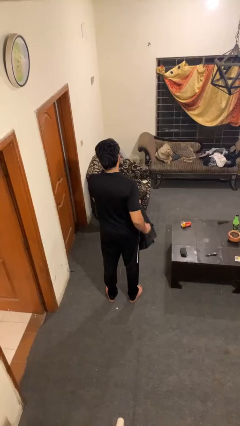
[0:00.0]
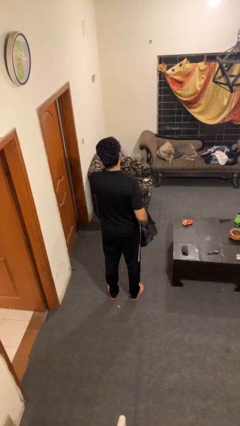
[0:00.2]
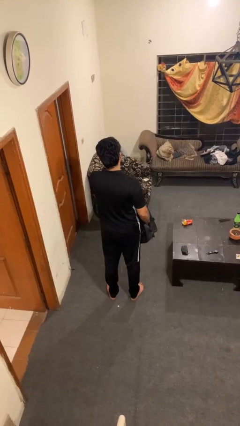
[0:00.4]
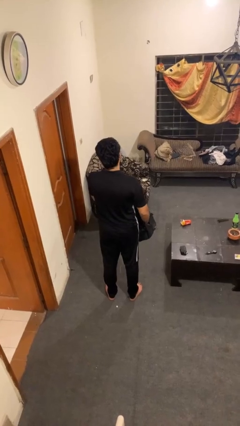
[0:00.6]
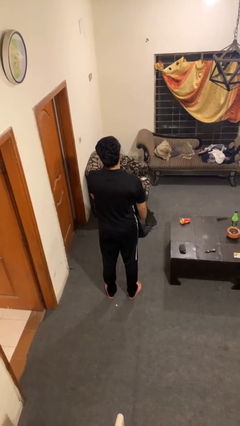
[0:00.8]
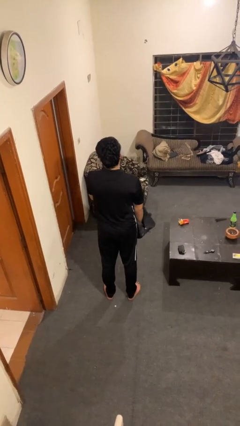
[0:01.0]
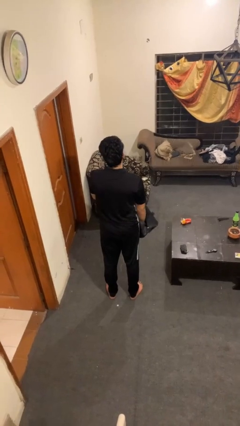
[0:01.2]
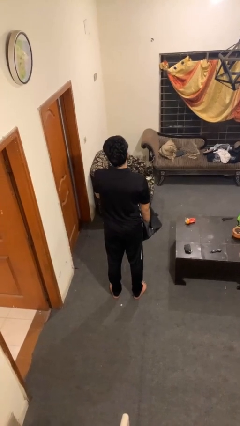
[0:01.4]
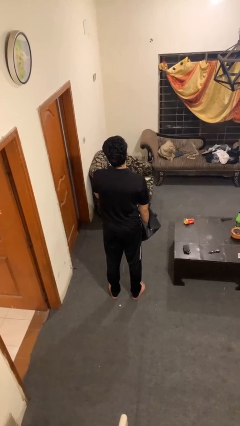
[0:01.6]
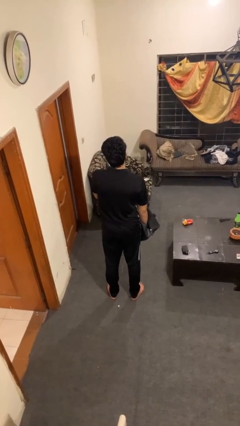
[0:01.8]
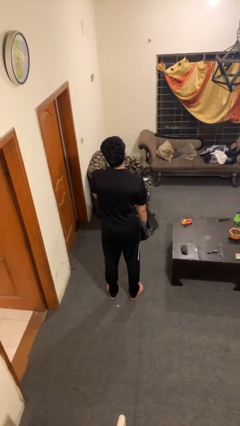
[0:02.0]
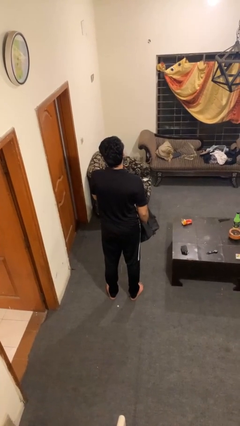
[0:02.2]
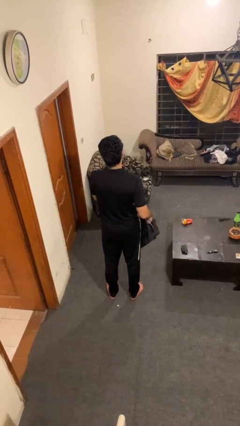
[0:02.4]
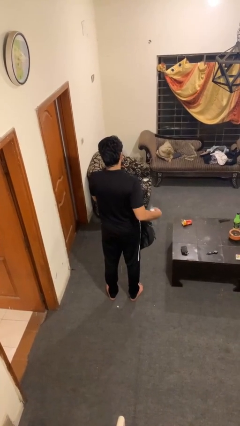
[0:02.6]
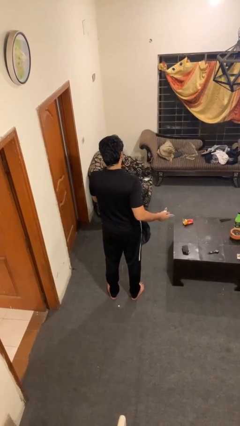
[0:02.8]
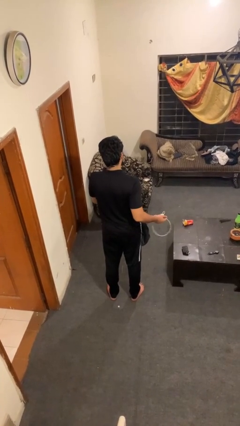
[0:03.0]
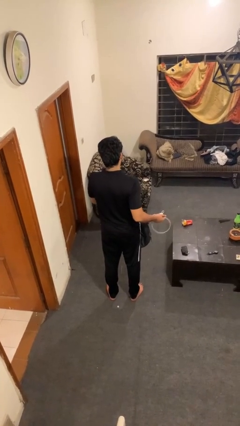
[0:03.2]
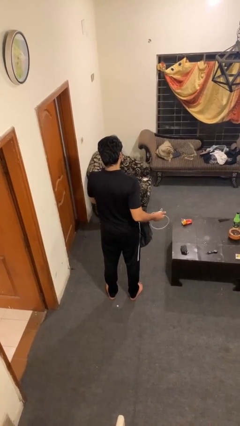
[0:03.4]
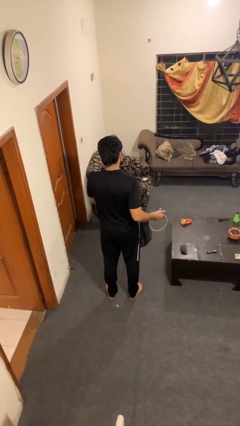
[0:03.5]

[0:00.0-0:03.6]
person takes object from bag

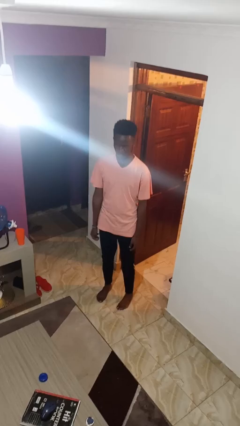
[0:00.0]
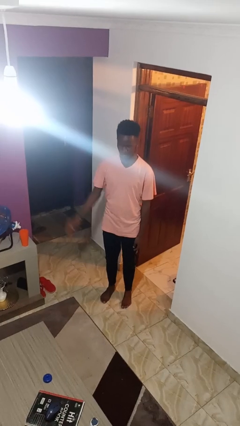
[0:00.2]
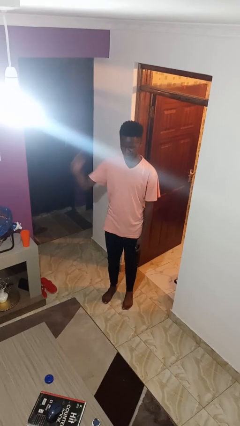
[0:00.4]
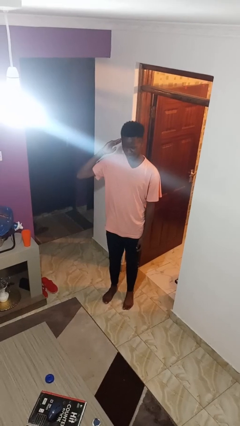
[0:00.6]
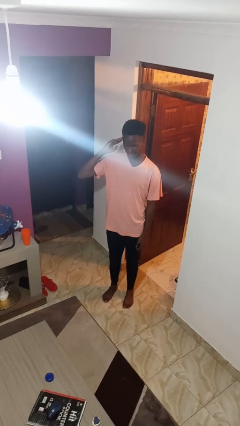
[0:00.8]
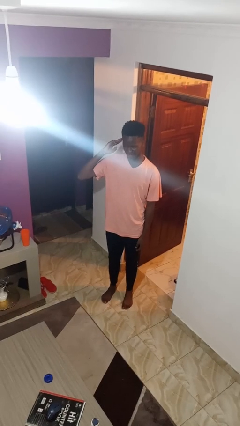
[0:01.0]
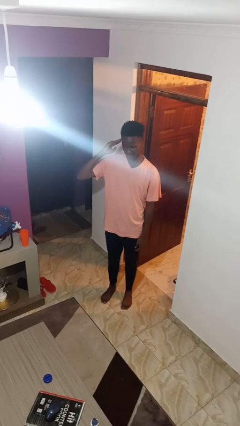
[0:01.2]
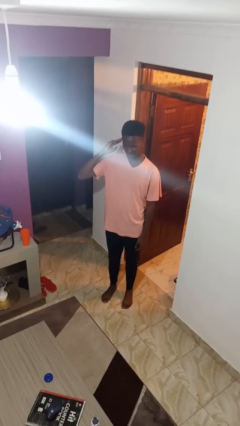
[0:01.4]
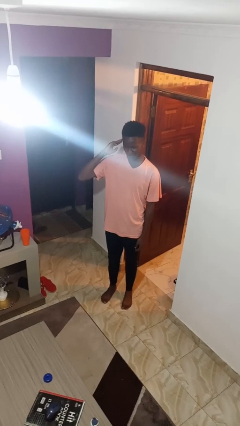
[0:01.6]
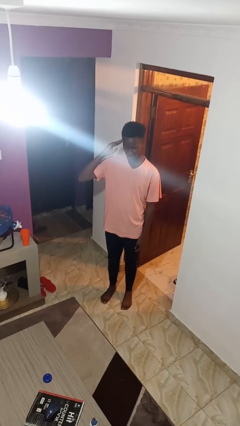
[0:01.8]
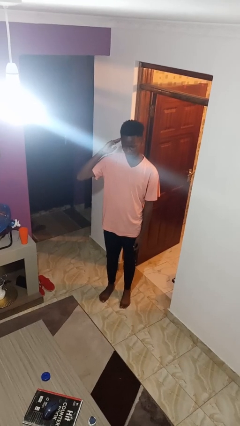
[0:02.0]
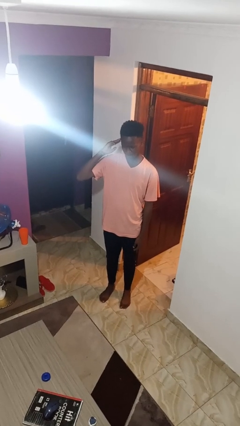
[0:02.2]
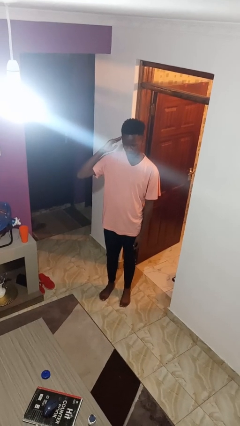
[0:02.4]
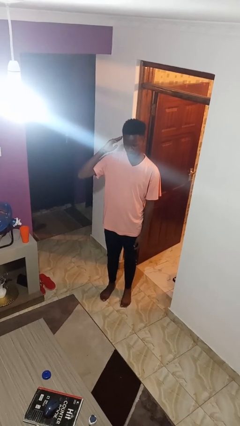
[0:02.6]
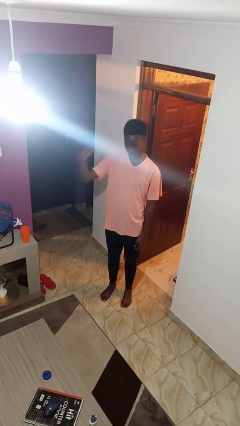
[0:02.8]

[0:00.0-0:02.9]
person salutes

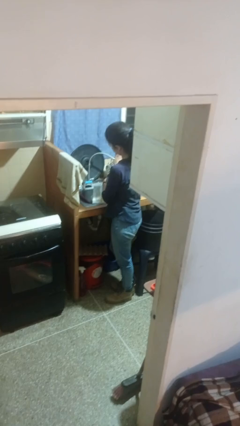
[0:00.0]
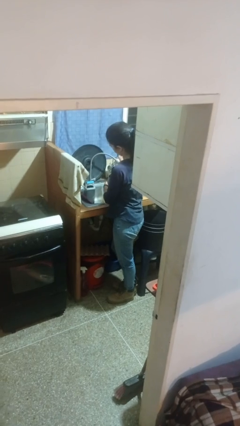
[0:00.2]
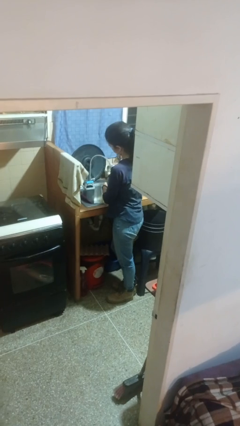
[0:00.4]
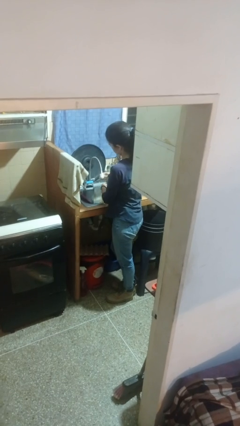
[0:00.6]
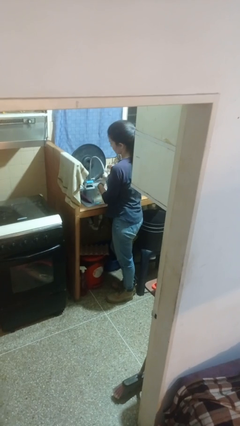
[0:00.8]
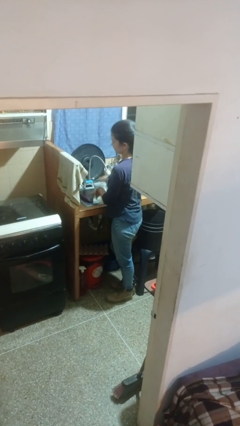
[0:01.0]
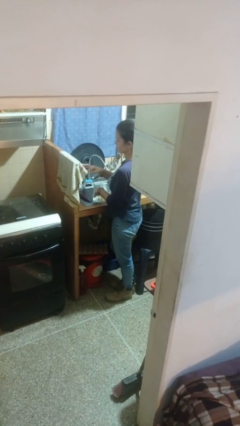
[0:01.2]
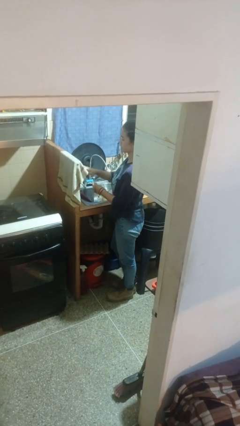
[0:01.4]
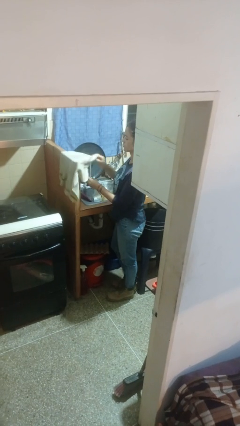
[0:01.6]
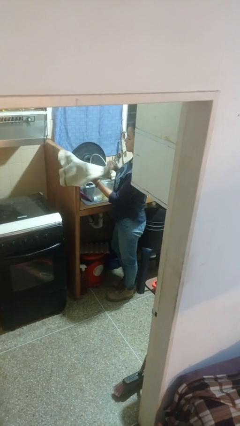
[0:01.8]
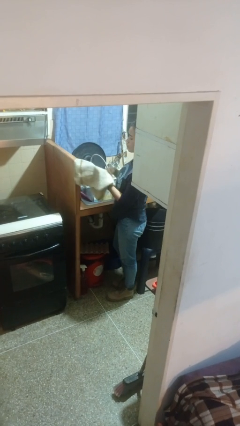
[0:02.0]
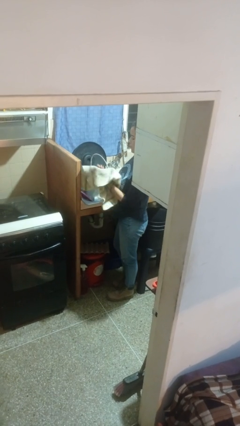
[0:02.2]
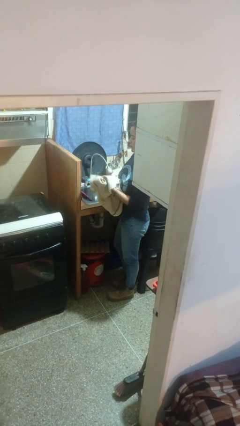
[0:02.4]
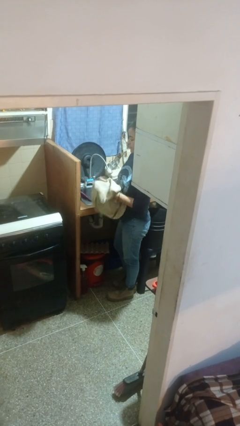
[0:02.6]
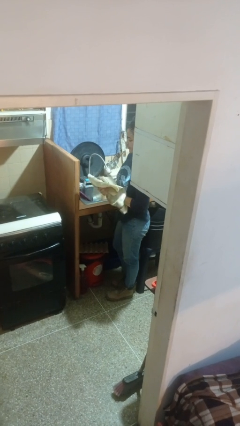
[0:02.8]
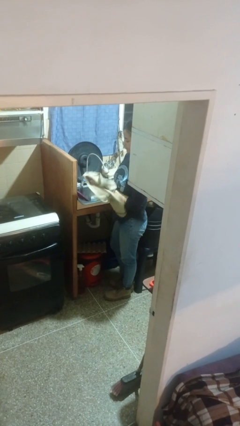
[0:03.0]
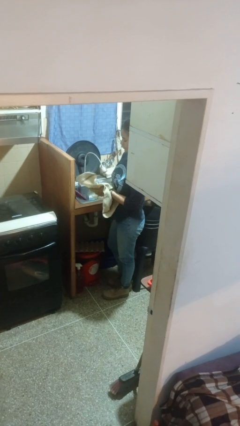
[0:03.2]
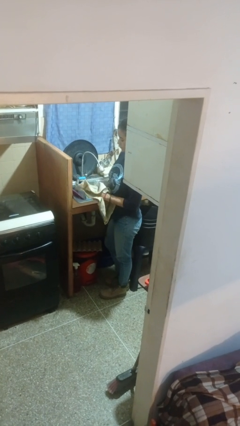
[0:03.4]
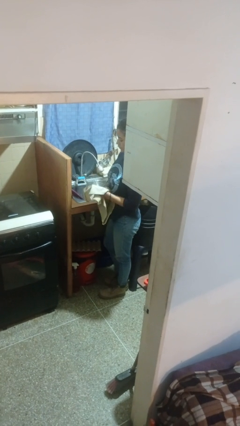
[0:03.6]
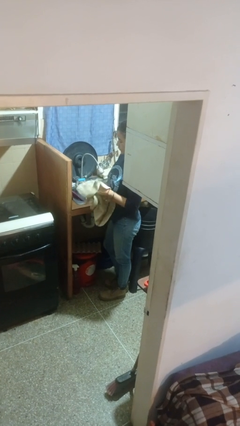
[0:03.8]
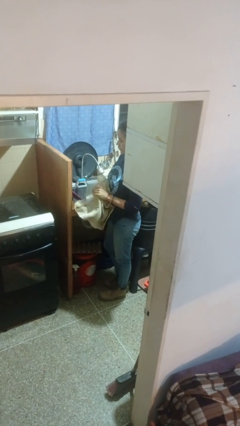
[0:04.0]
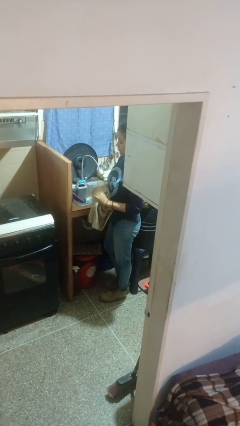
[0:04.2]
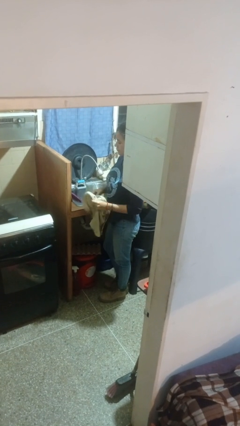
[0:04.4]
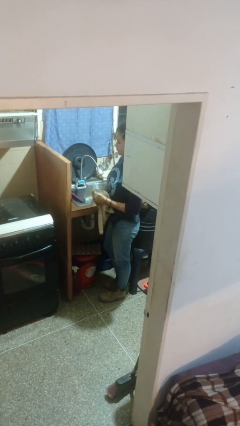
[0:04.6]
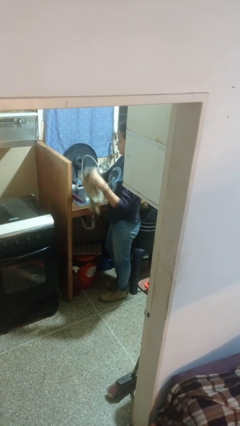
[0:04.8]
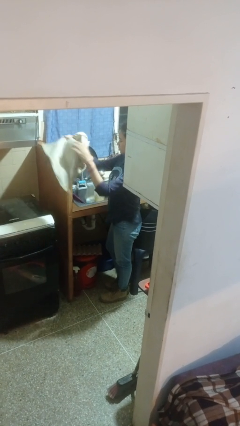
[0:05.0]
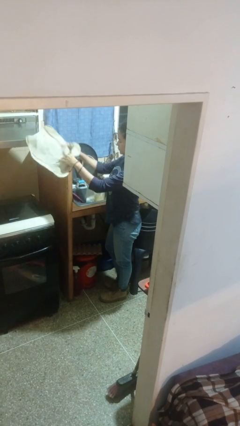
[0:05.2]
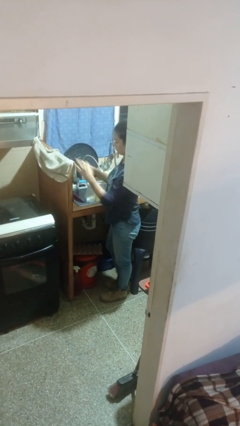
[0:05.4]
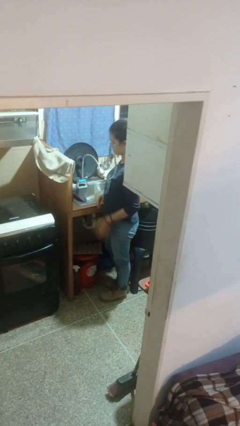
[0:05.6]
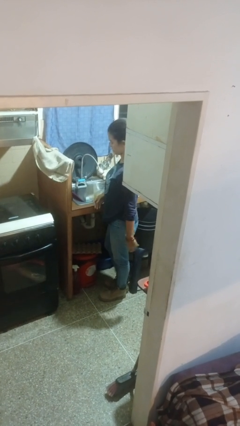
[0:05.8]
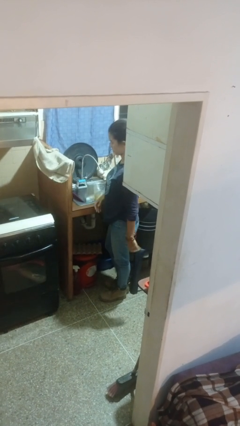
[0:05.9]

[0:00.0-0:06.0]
person dries hands with towel

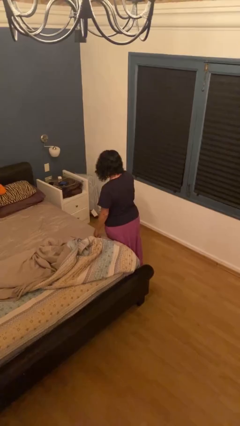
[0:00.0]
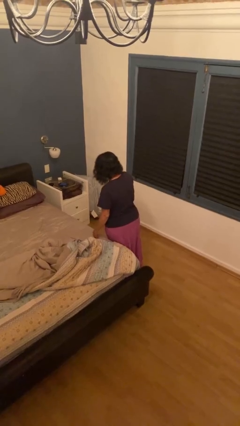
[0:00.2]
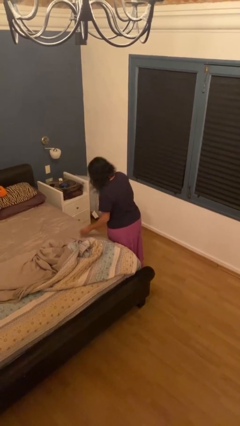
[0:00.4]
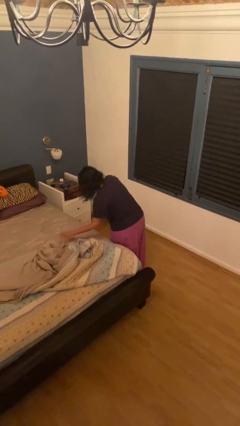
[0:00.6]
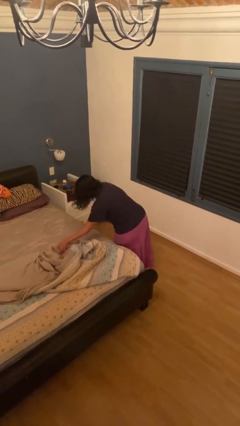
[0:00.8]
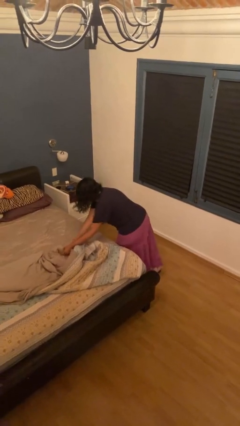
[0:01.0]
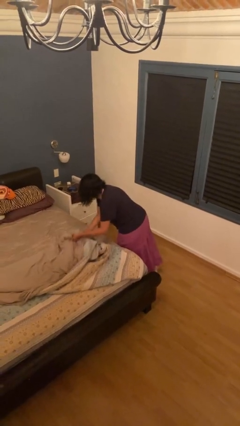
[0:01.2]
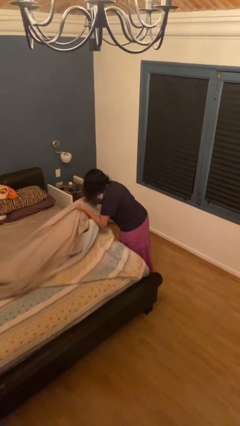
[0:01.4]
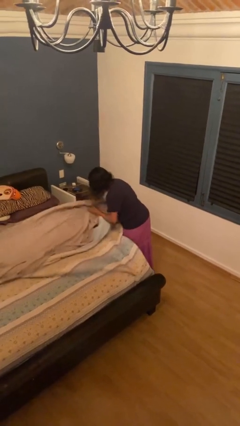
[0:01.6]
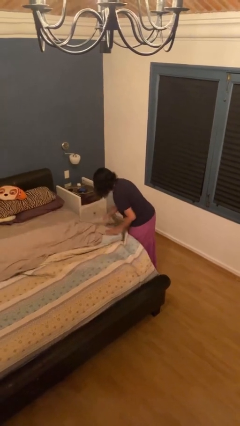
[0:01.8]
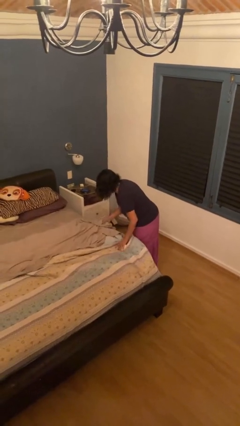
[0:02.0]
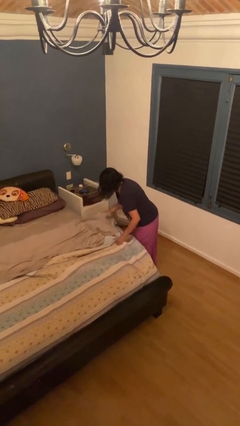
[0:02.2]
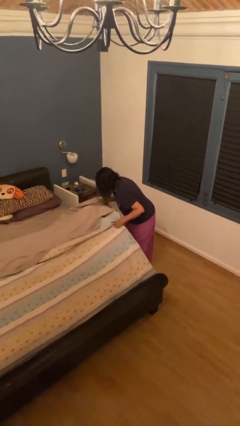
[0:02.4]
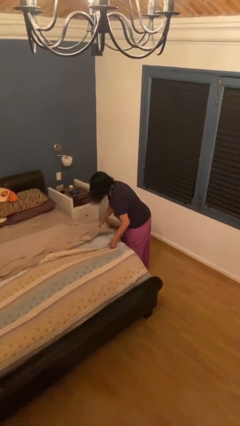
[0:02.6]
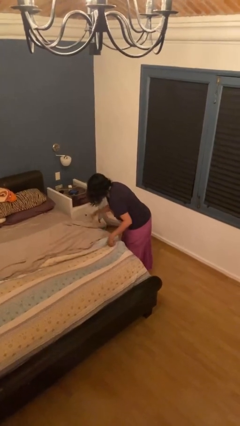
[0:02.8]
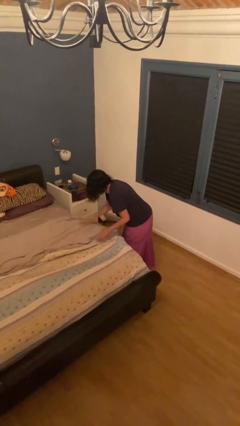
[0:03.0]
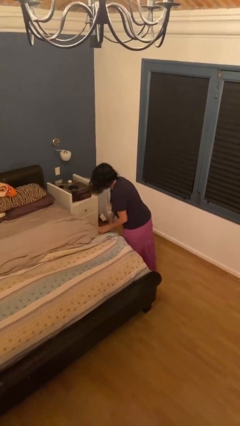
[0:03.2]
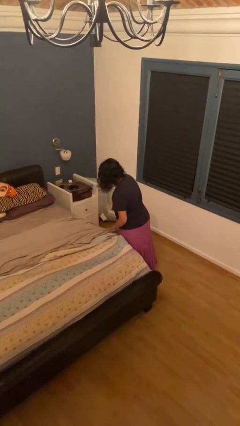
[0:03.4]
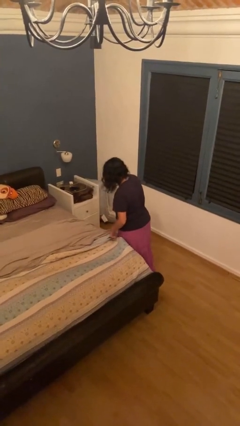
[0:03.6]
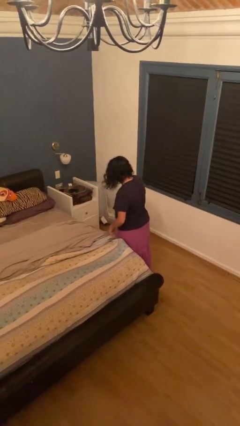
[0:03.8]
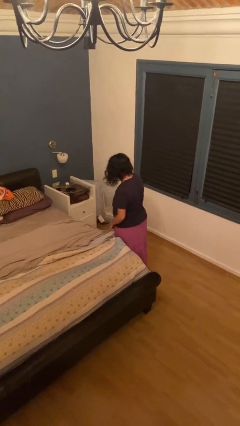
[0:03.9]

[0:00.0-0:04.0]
person makes bed

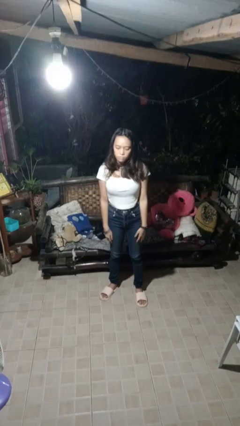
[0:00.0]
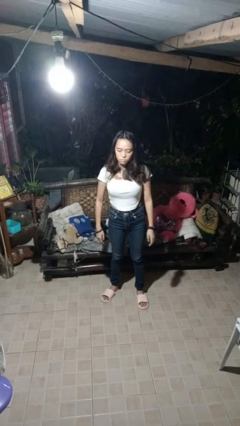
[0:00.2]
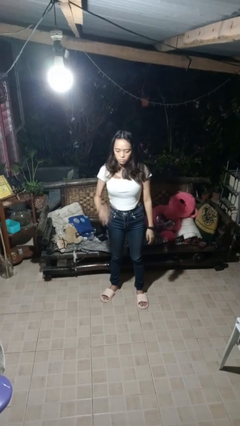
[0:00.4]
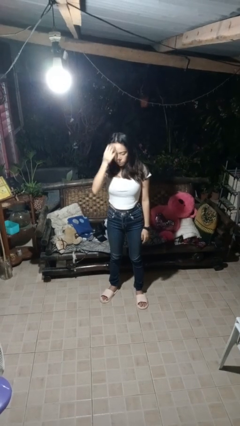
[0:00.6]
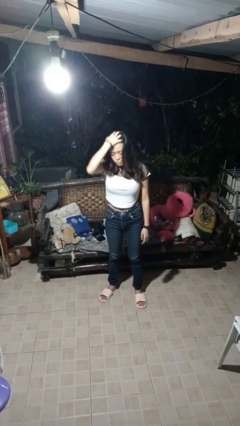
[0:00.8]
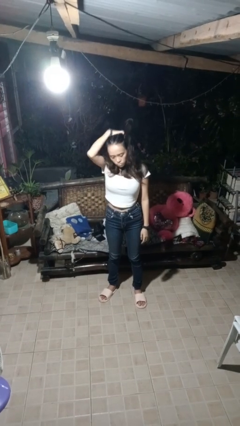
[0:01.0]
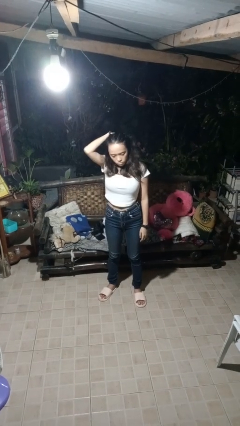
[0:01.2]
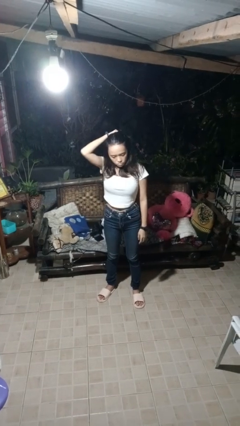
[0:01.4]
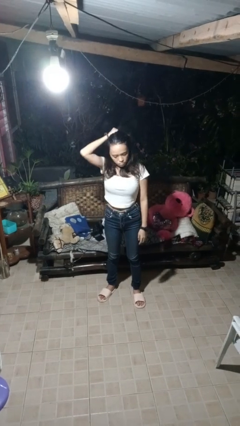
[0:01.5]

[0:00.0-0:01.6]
person strokes hair
